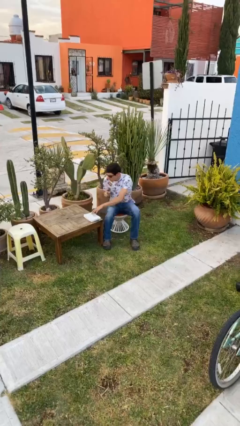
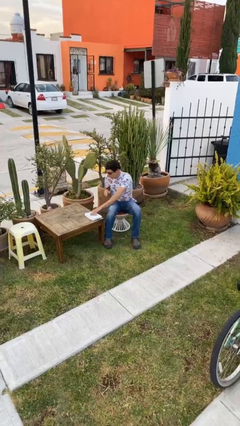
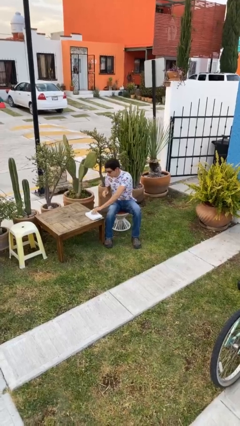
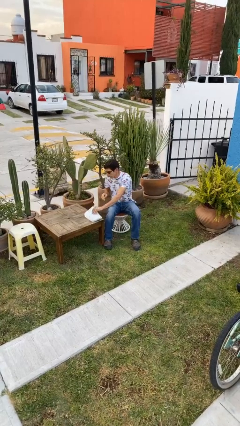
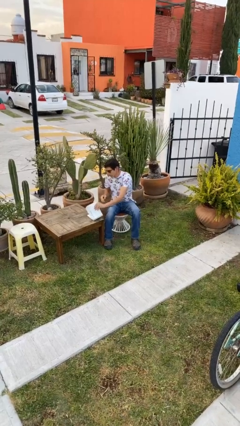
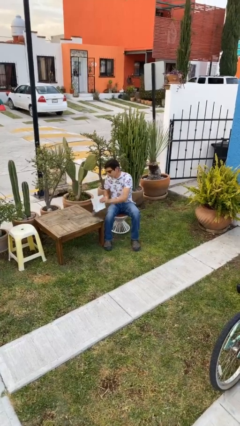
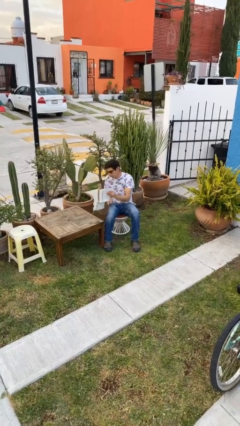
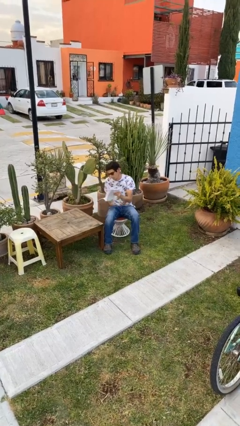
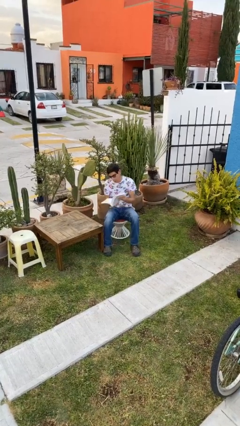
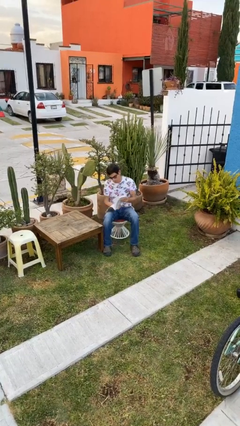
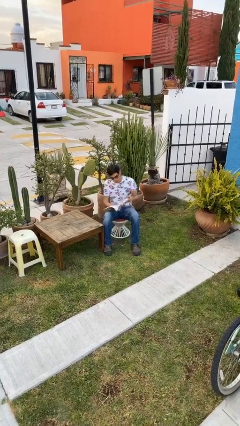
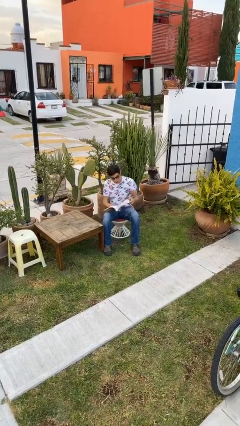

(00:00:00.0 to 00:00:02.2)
person picks up object from table

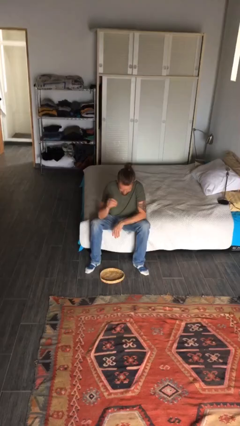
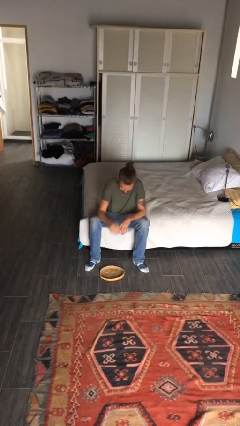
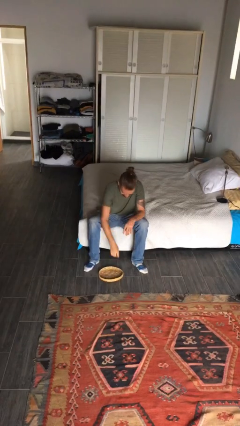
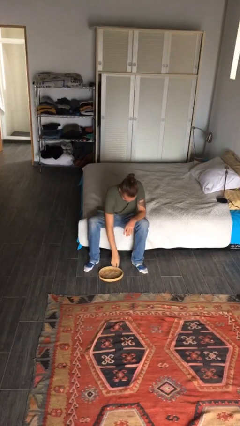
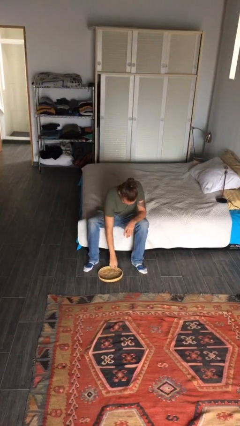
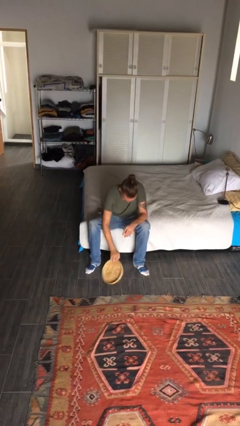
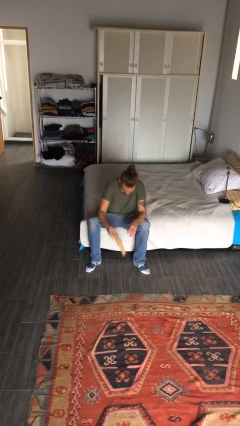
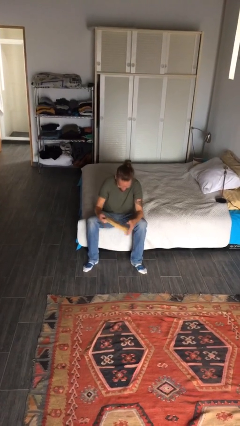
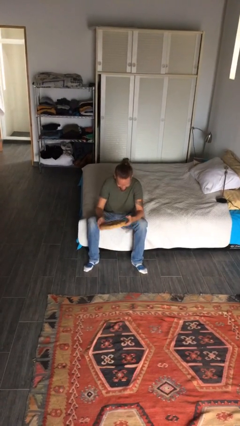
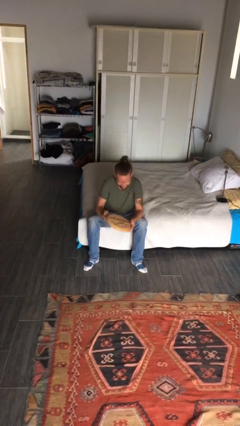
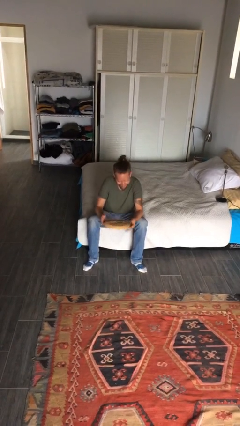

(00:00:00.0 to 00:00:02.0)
person picks up object from floor

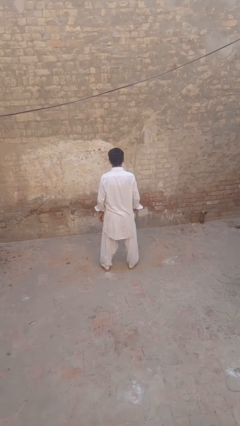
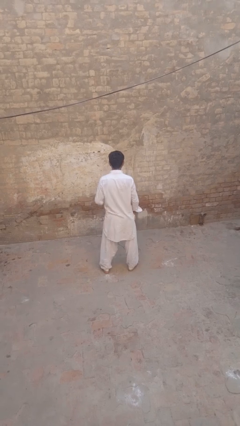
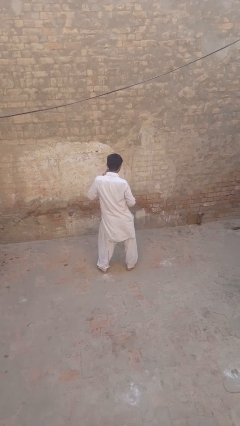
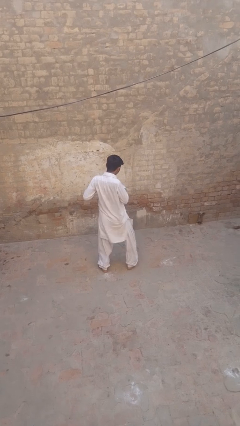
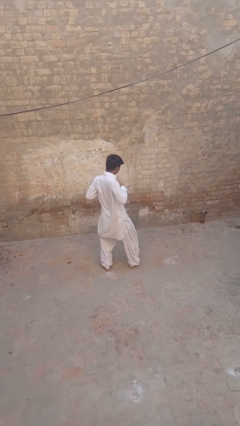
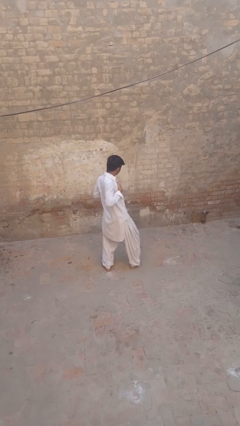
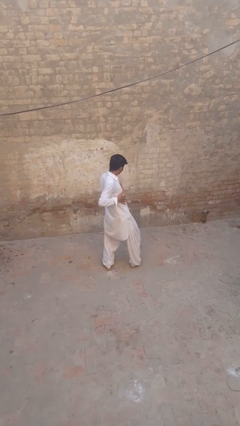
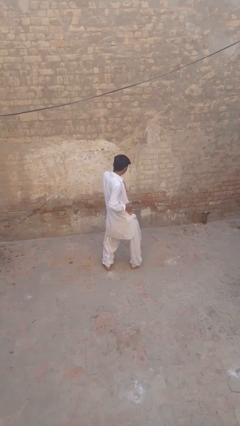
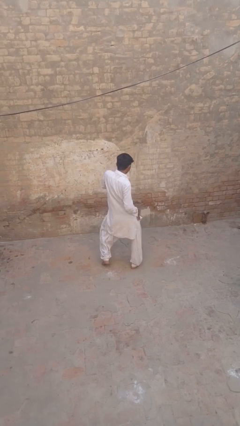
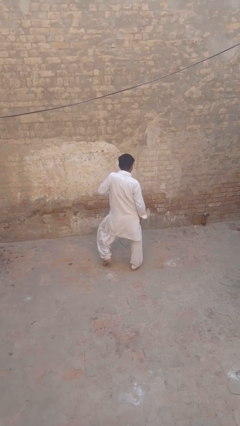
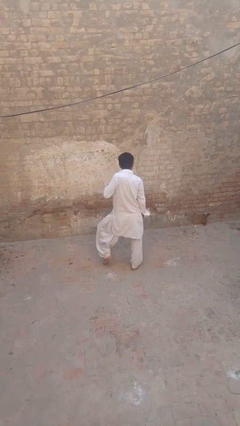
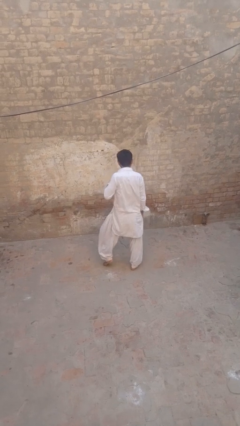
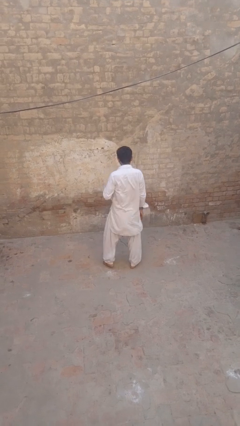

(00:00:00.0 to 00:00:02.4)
person dances in place

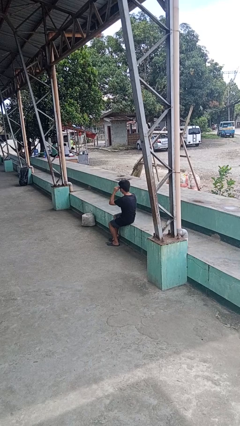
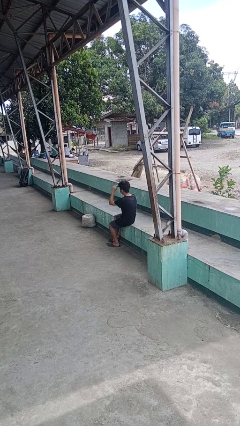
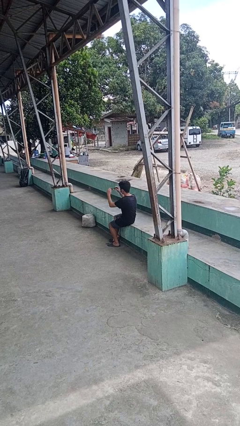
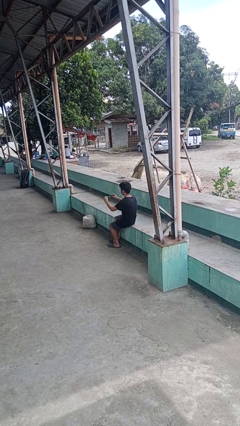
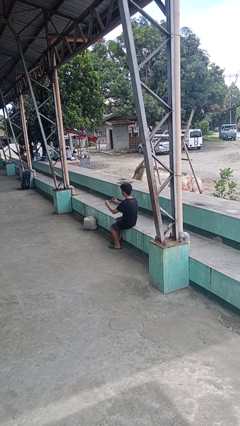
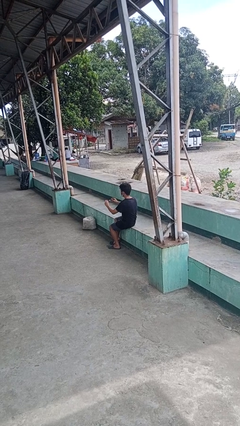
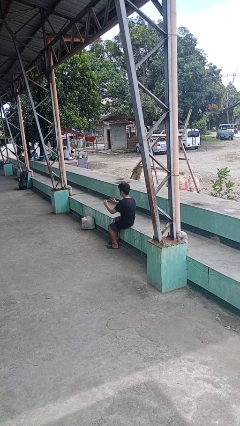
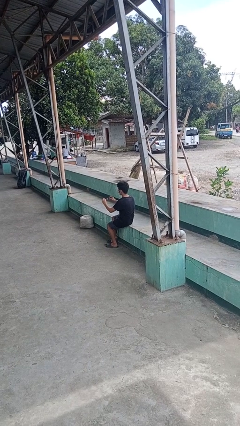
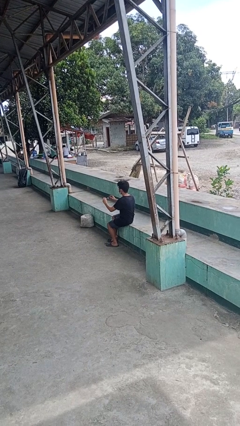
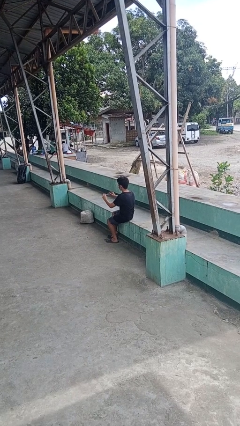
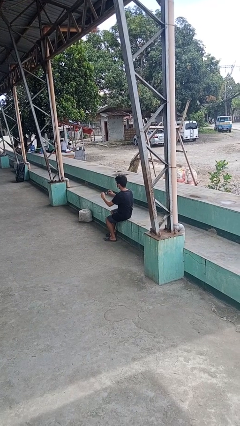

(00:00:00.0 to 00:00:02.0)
person takes off sunglasses

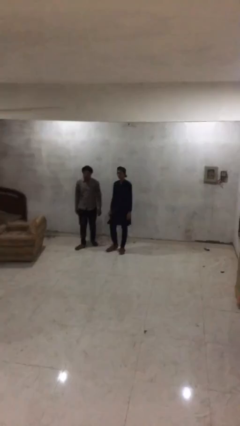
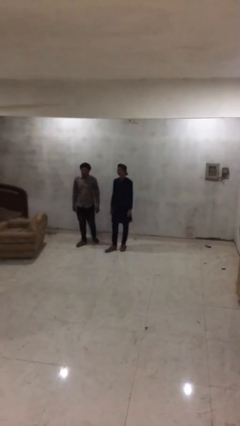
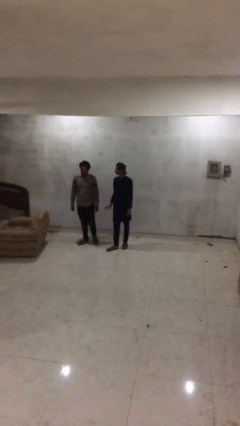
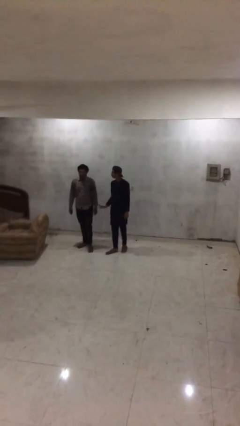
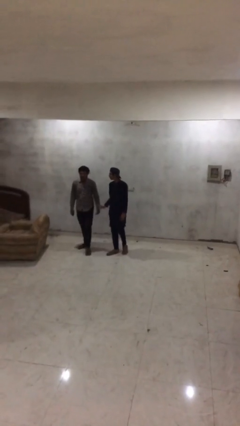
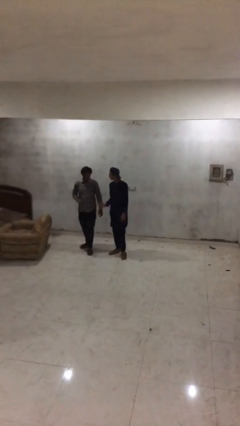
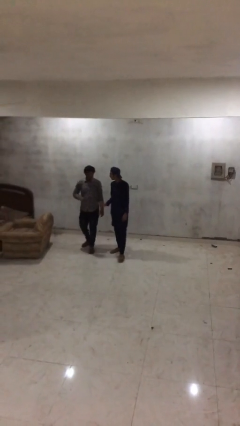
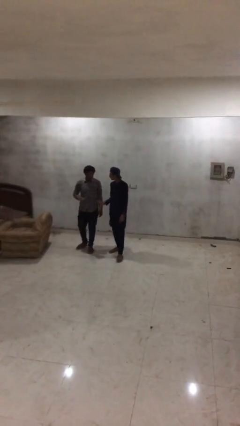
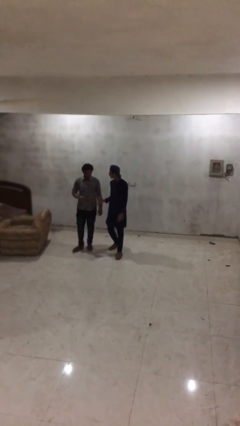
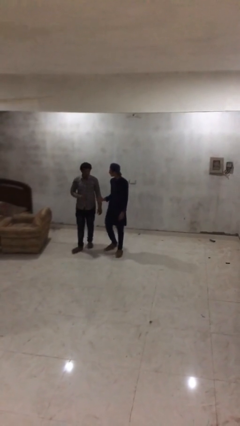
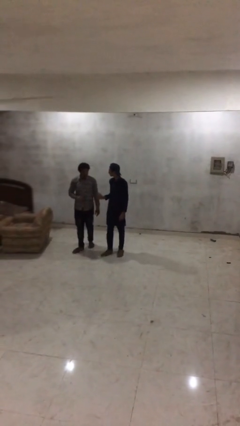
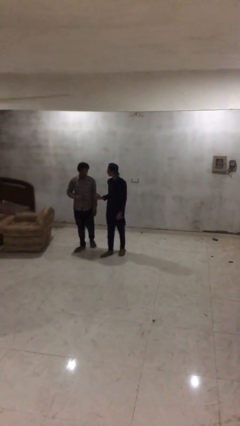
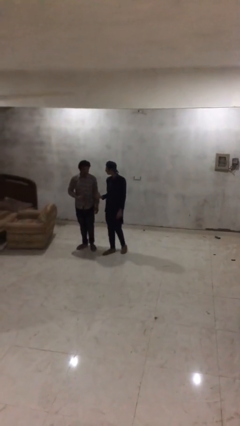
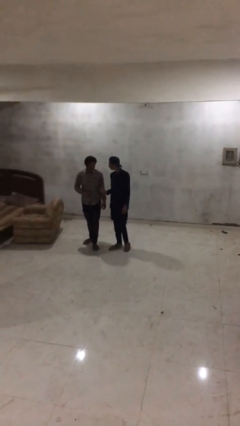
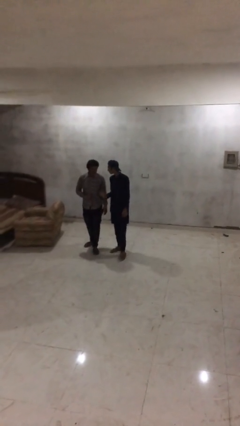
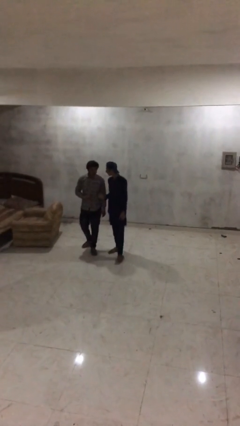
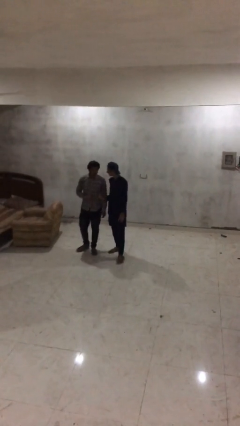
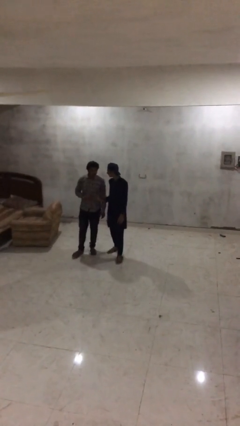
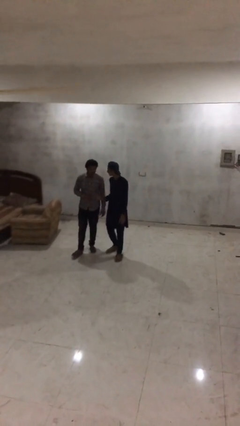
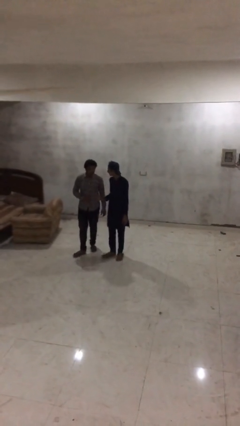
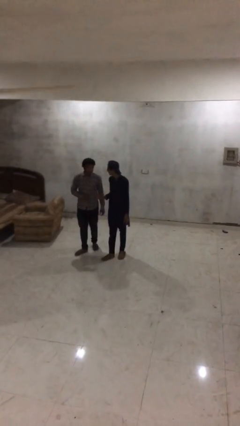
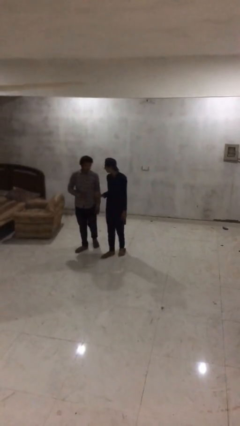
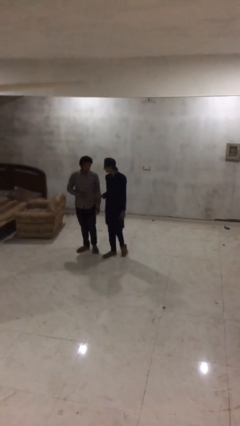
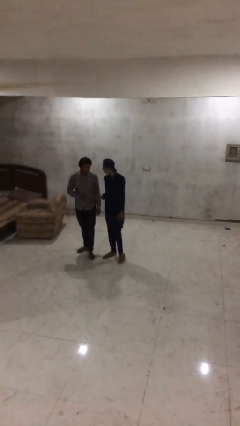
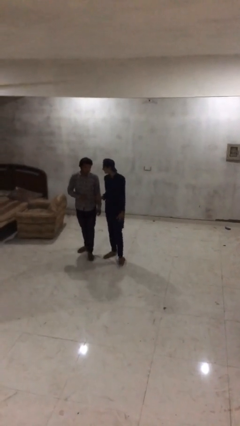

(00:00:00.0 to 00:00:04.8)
person talks to person

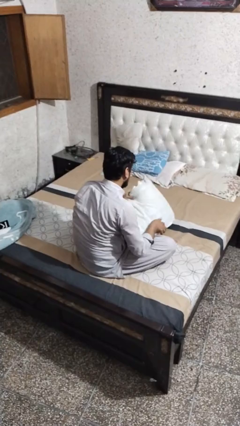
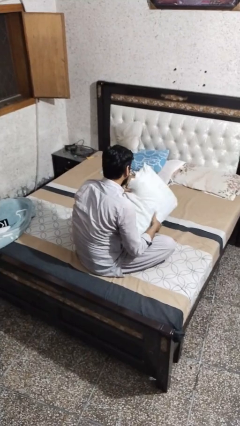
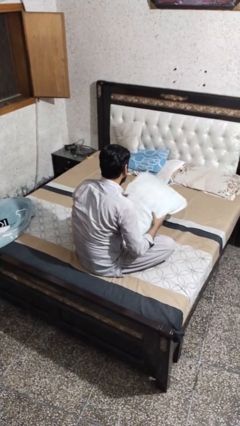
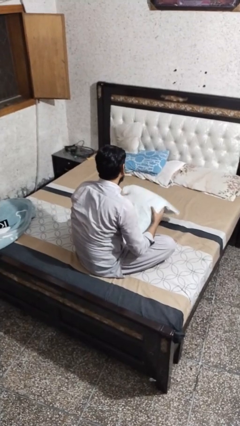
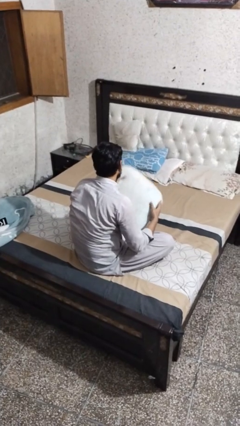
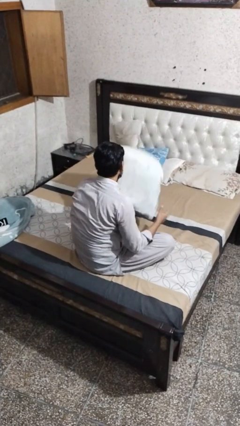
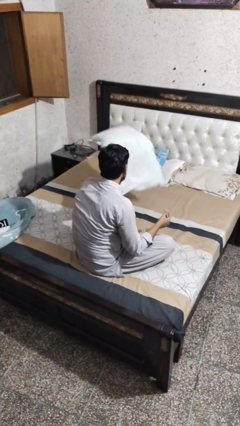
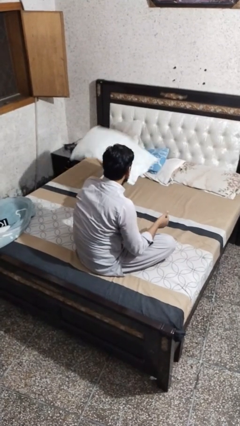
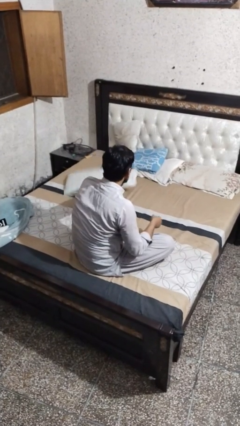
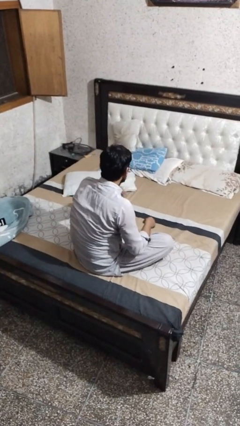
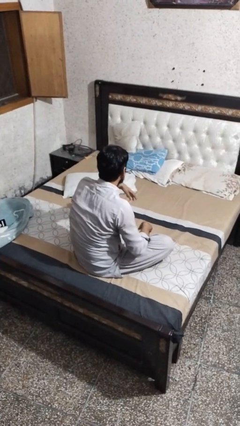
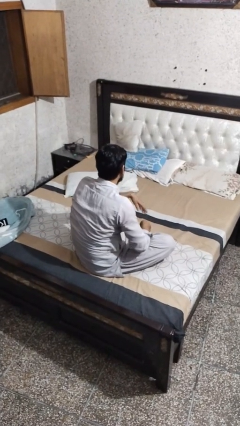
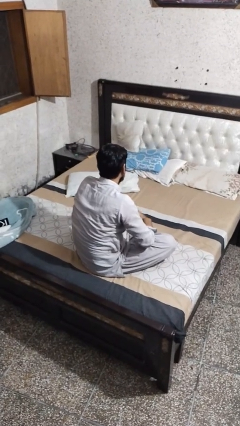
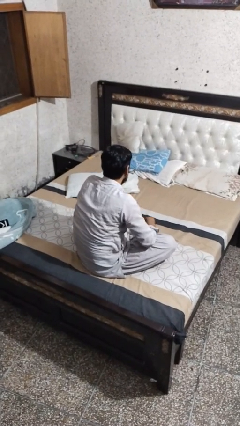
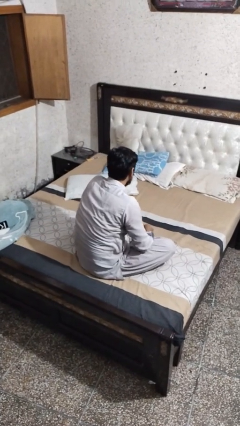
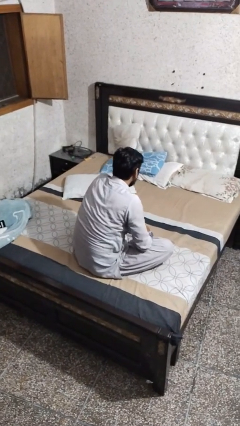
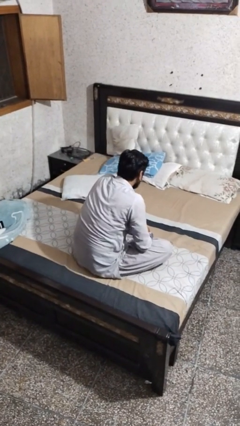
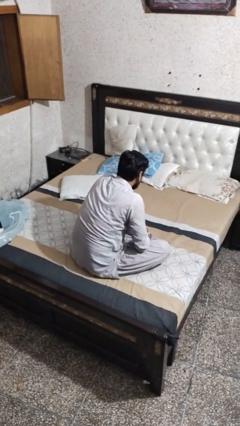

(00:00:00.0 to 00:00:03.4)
person puts down object on bed

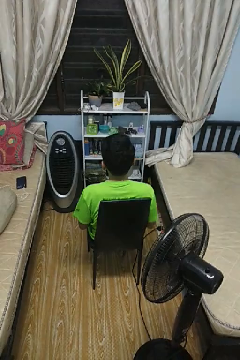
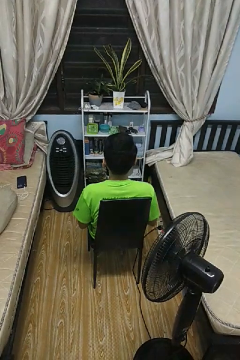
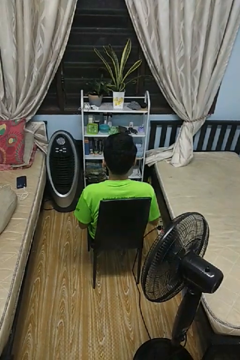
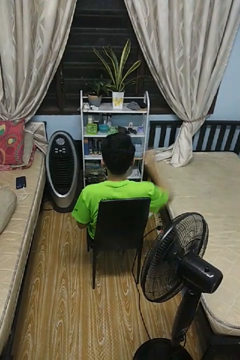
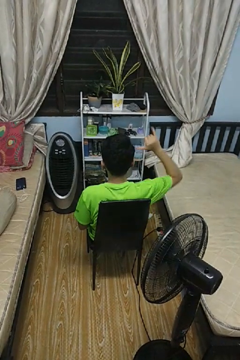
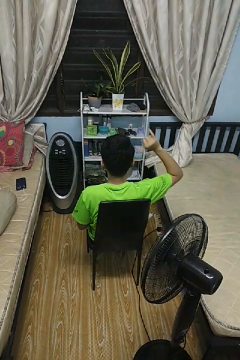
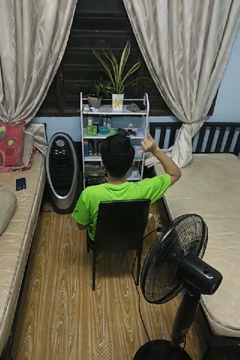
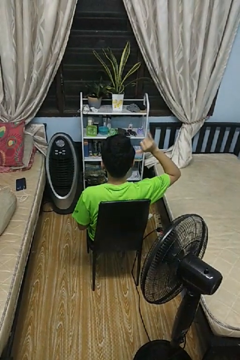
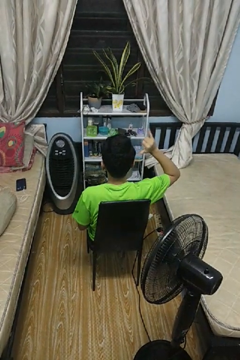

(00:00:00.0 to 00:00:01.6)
person gestures hang loose
